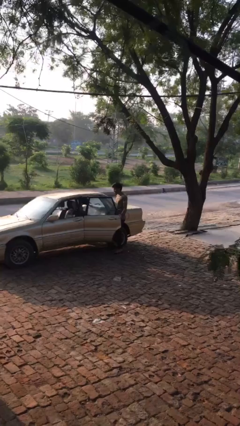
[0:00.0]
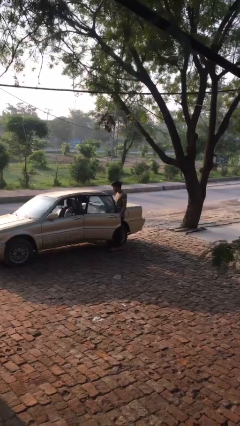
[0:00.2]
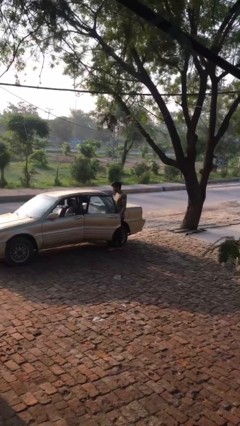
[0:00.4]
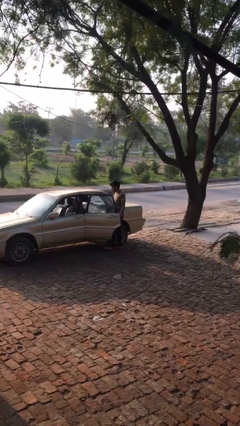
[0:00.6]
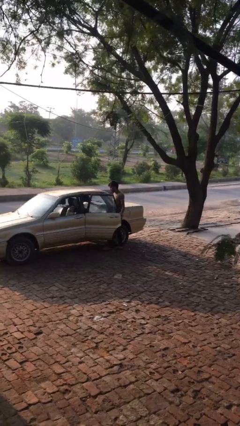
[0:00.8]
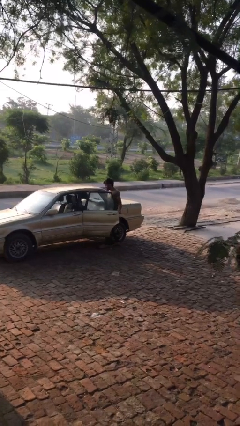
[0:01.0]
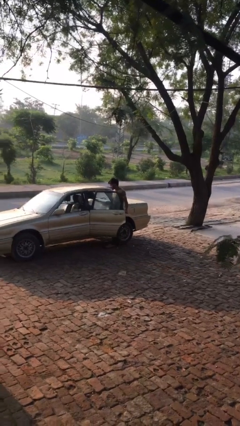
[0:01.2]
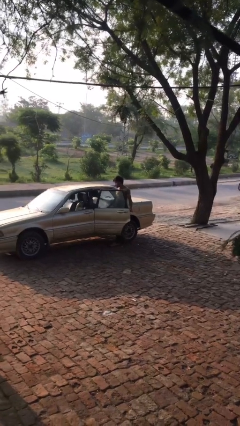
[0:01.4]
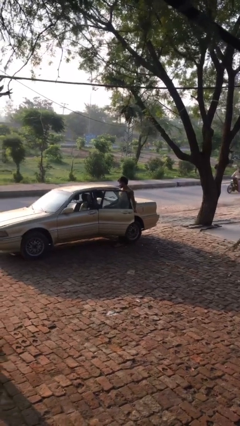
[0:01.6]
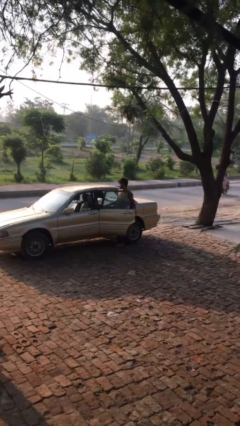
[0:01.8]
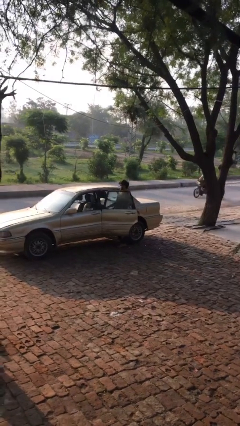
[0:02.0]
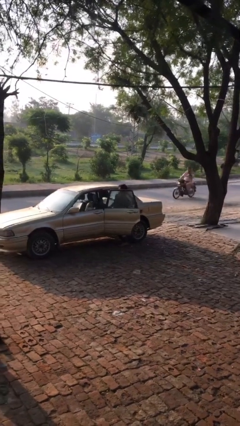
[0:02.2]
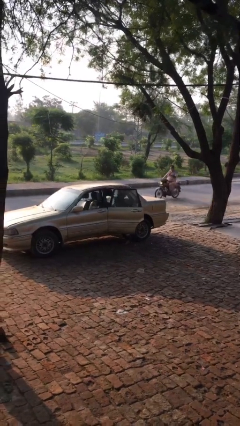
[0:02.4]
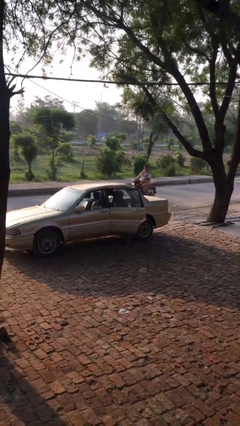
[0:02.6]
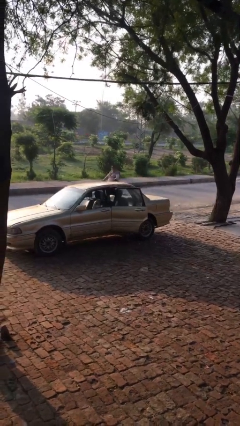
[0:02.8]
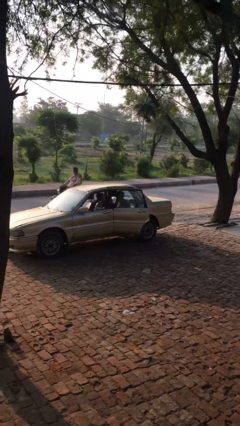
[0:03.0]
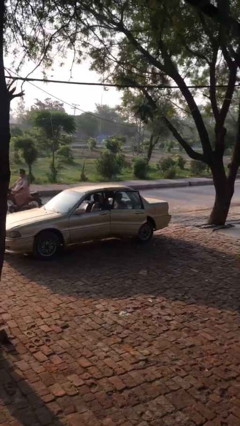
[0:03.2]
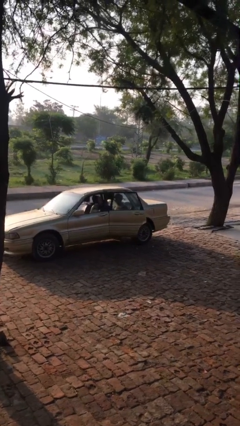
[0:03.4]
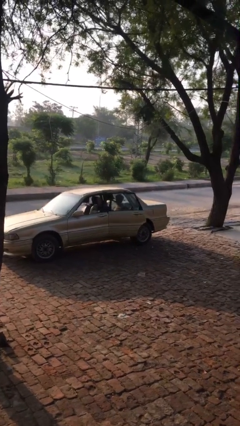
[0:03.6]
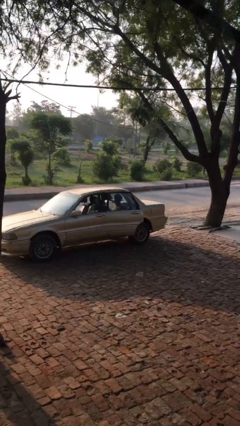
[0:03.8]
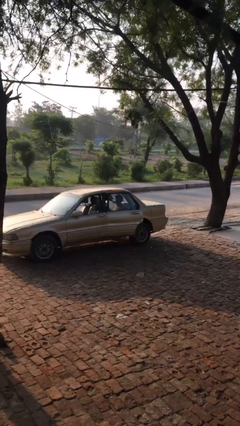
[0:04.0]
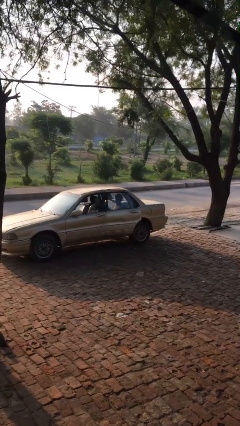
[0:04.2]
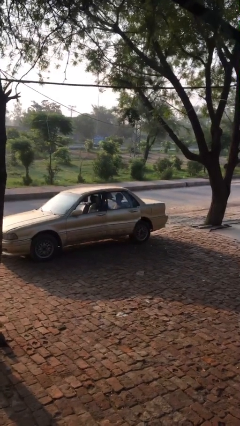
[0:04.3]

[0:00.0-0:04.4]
person enters car

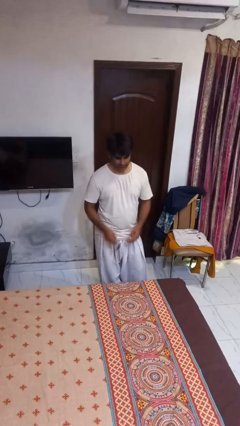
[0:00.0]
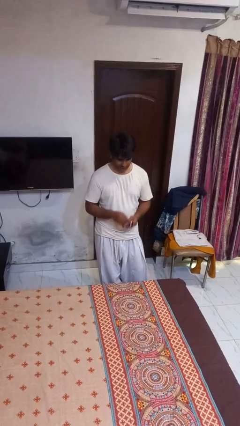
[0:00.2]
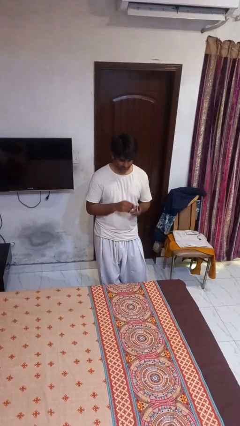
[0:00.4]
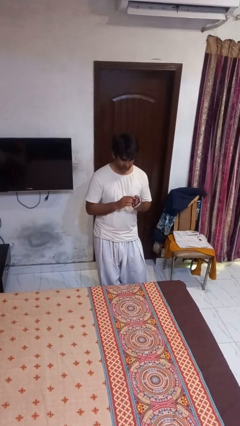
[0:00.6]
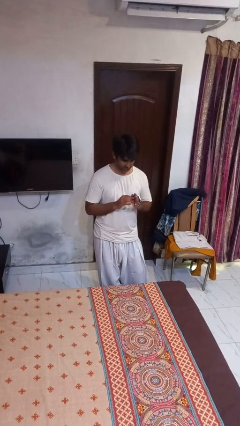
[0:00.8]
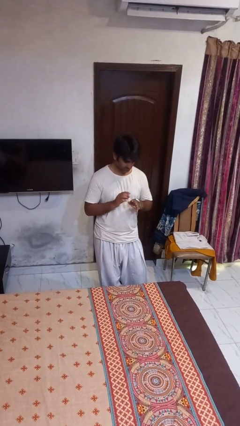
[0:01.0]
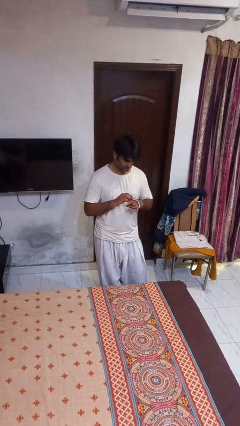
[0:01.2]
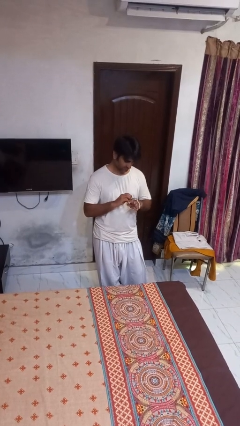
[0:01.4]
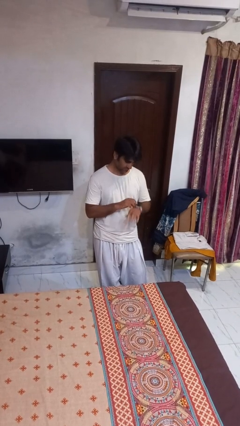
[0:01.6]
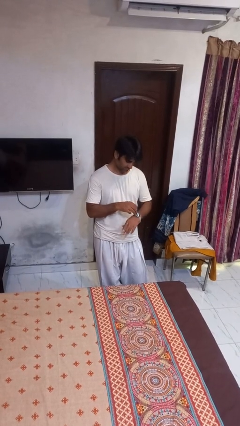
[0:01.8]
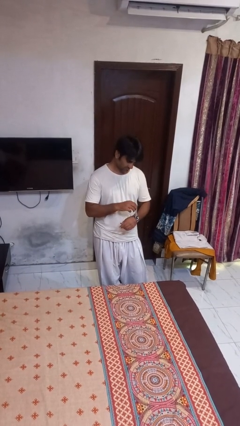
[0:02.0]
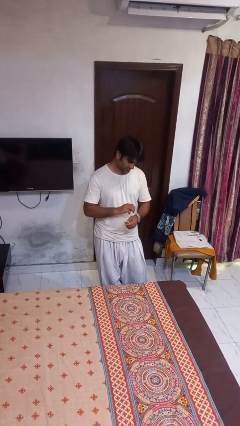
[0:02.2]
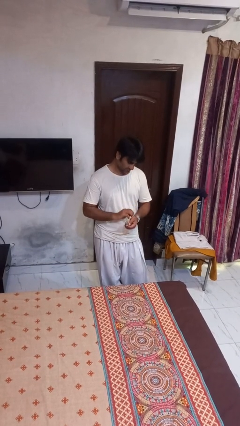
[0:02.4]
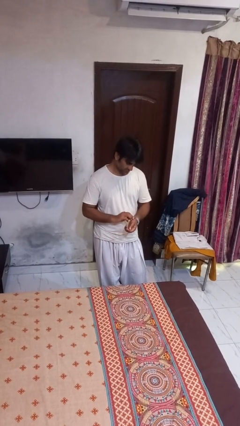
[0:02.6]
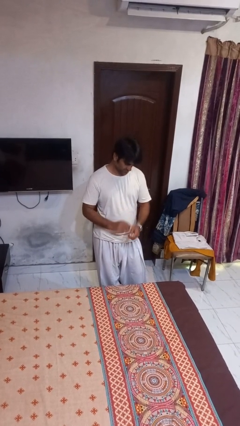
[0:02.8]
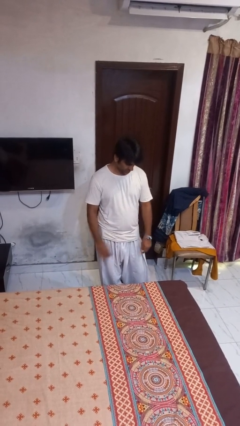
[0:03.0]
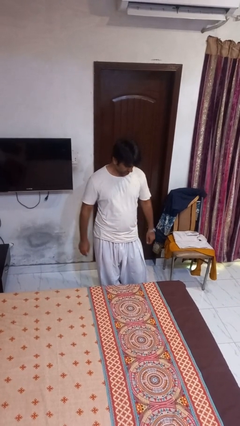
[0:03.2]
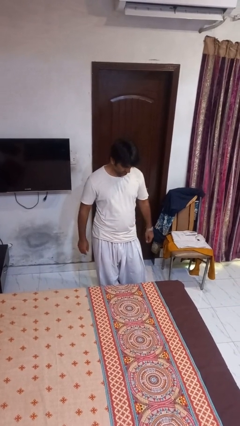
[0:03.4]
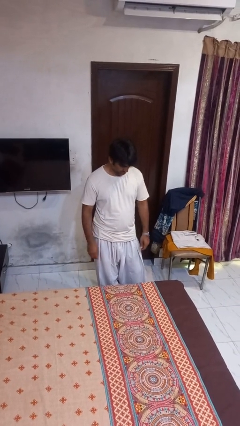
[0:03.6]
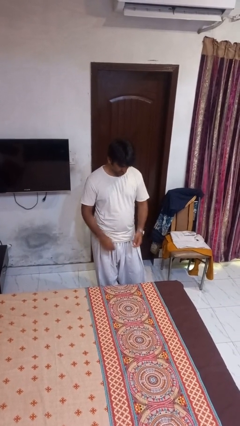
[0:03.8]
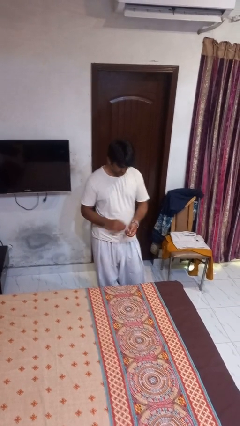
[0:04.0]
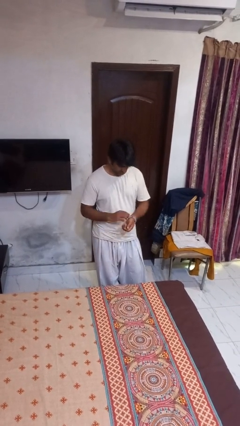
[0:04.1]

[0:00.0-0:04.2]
person puts on wristwatch

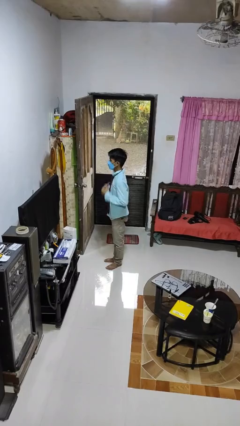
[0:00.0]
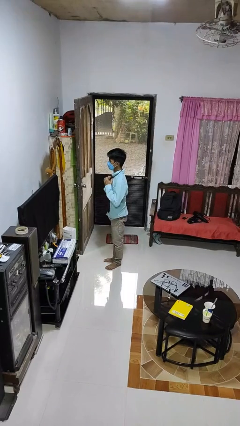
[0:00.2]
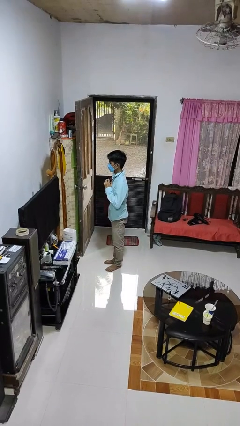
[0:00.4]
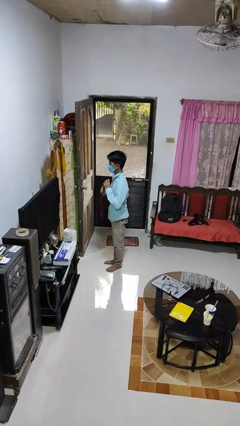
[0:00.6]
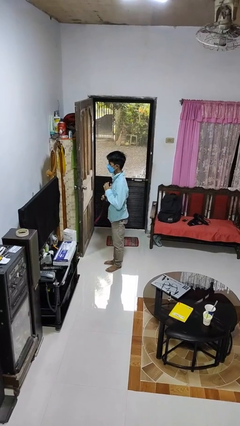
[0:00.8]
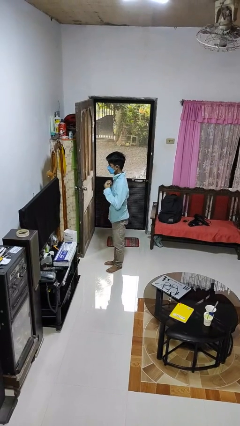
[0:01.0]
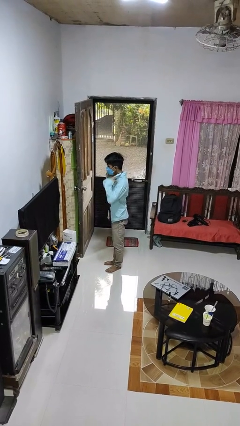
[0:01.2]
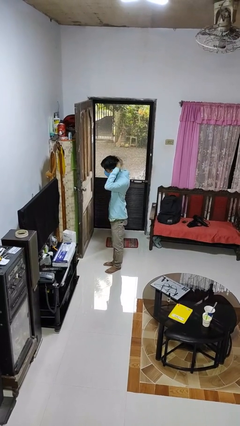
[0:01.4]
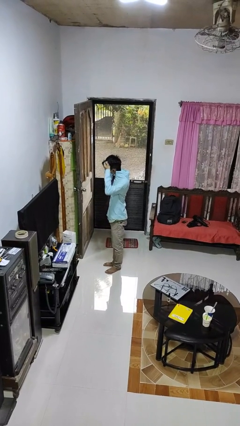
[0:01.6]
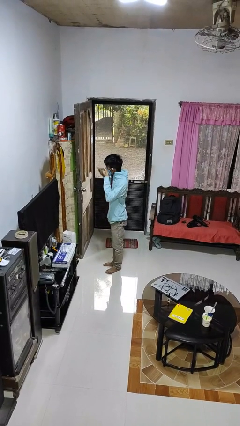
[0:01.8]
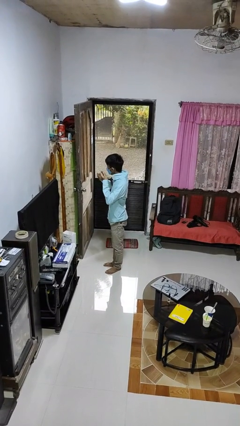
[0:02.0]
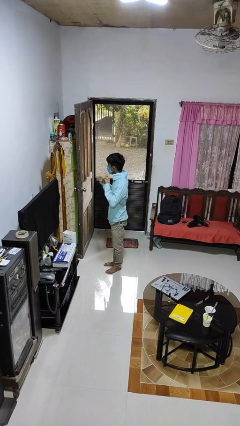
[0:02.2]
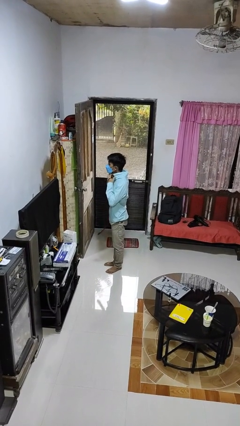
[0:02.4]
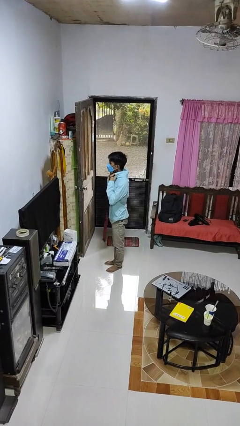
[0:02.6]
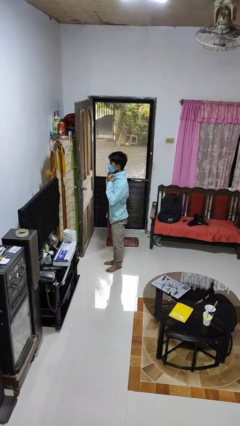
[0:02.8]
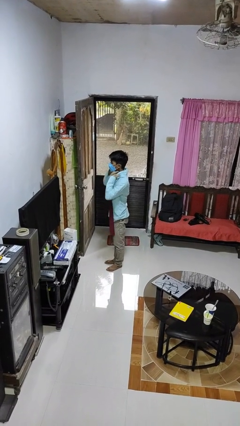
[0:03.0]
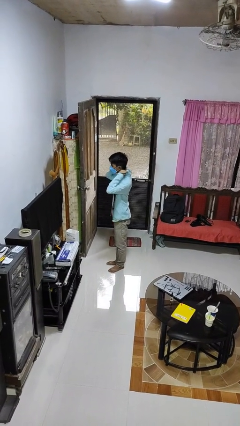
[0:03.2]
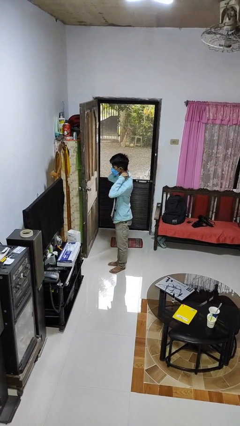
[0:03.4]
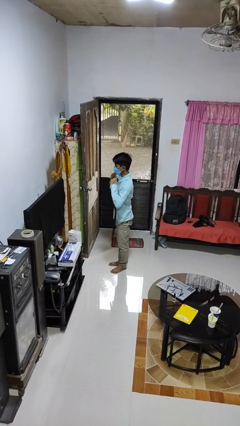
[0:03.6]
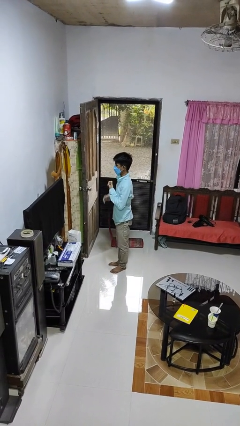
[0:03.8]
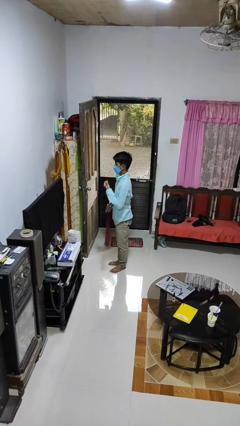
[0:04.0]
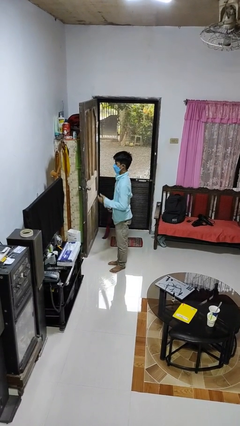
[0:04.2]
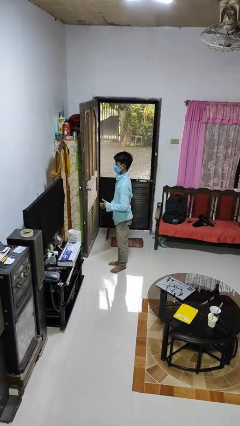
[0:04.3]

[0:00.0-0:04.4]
person takes off necktie

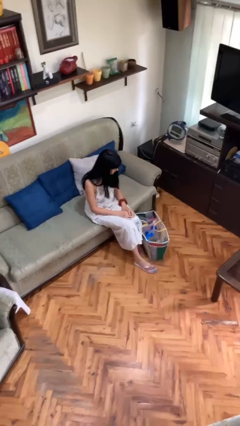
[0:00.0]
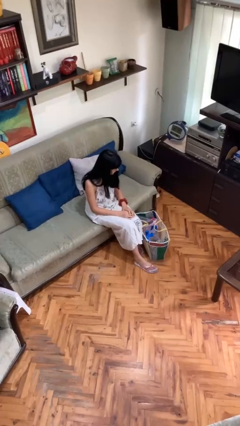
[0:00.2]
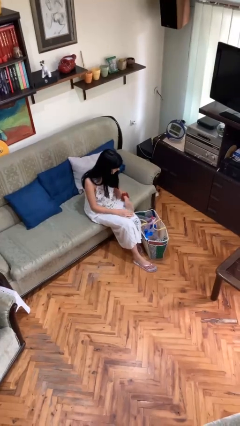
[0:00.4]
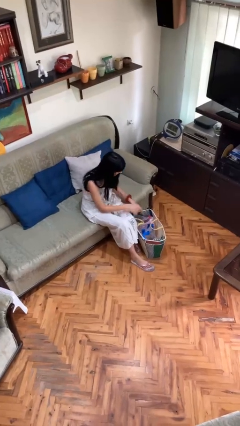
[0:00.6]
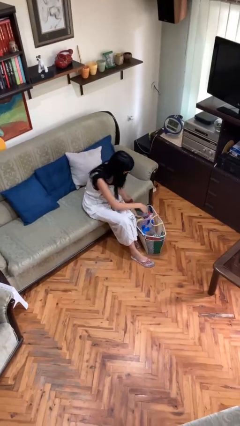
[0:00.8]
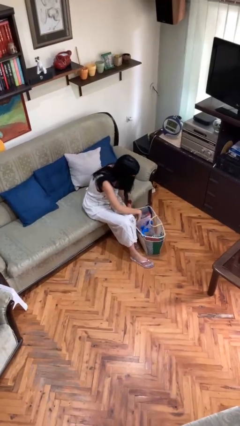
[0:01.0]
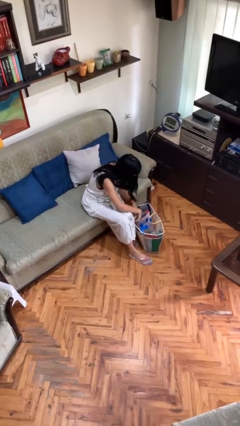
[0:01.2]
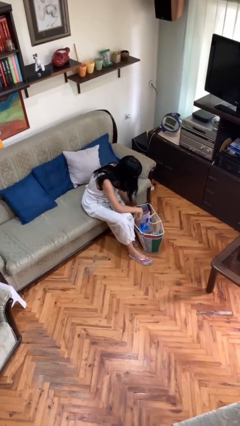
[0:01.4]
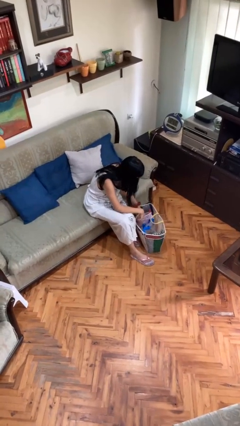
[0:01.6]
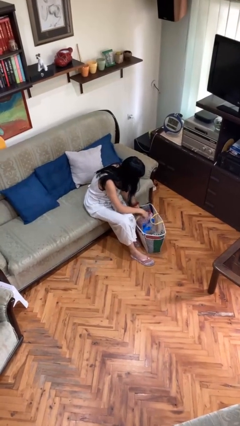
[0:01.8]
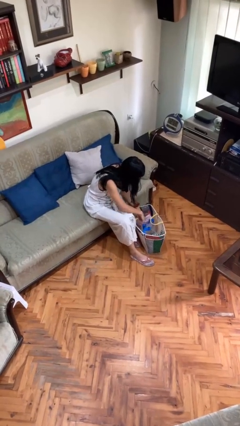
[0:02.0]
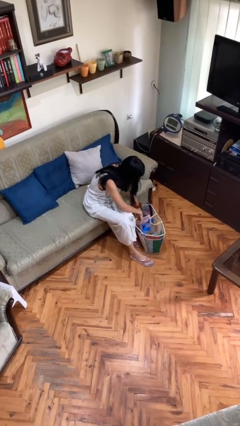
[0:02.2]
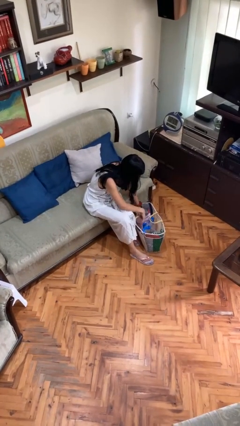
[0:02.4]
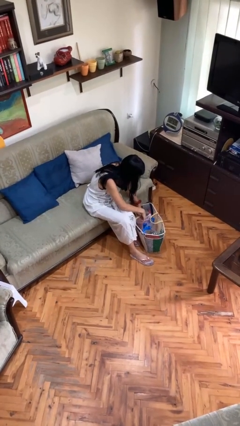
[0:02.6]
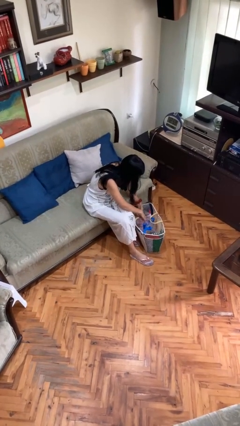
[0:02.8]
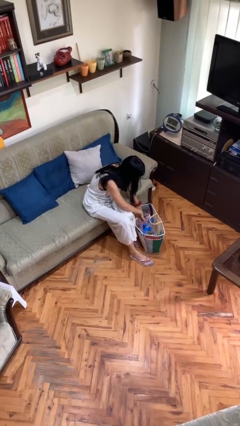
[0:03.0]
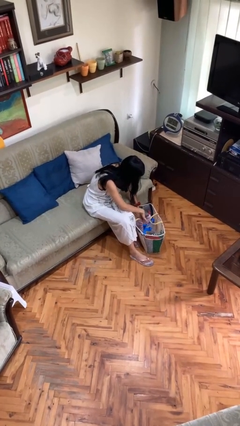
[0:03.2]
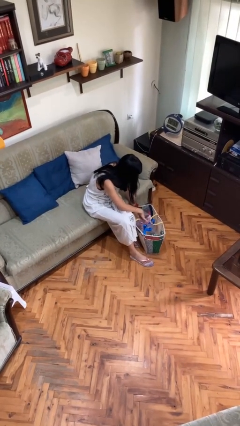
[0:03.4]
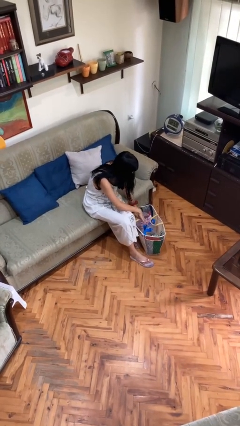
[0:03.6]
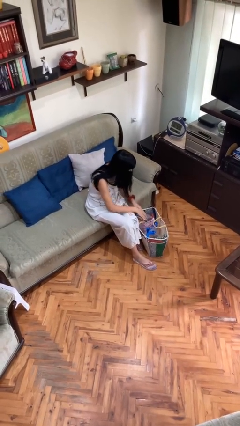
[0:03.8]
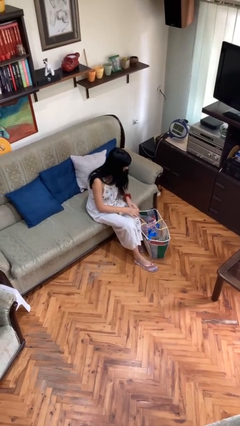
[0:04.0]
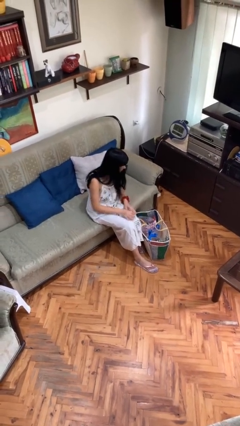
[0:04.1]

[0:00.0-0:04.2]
person searches in bag

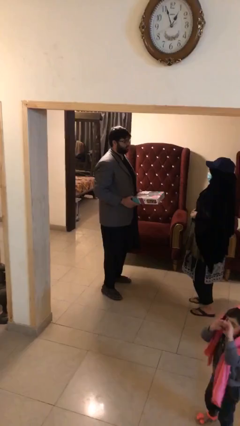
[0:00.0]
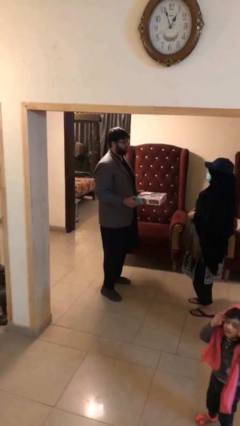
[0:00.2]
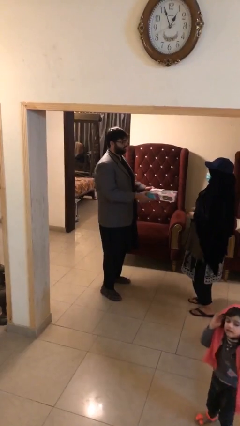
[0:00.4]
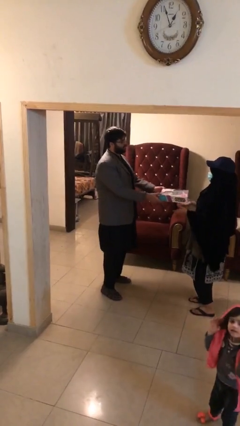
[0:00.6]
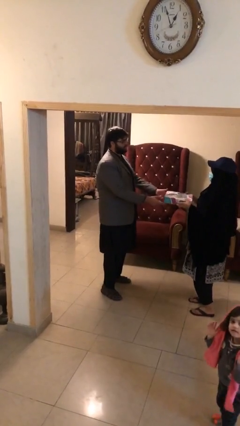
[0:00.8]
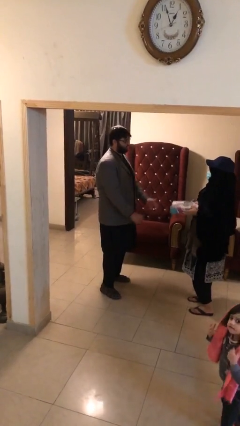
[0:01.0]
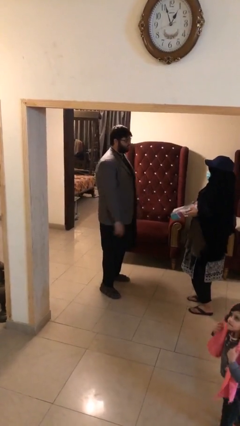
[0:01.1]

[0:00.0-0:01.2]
person transfers object to person
